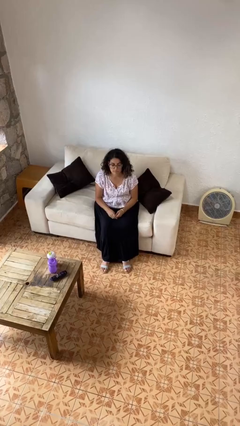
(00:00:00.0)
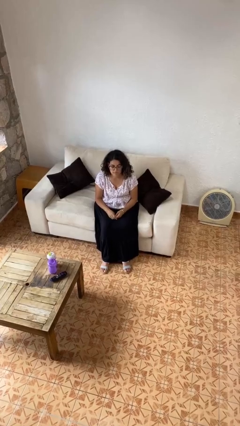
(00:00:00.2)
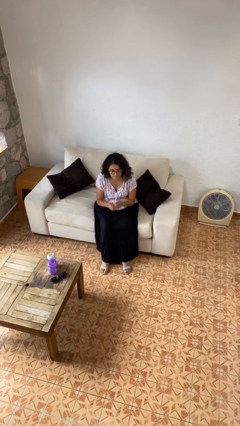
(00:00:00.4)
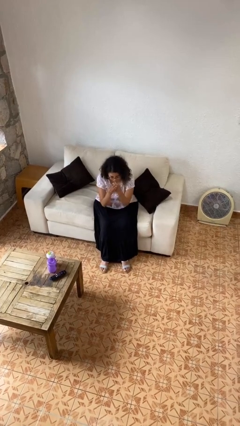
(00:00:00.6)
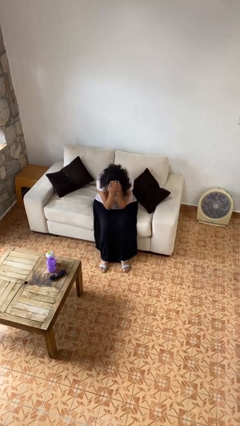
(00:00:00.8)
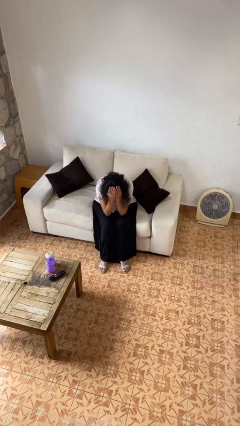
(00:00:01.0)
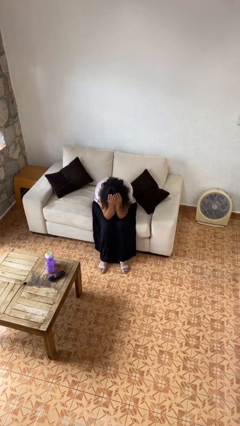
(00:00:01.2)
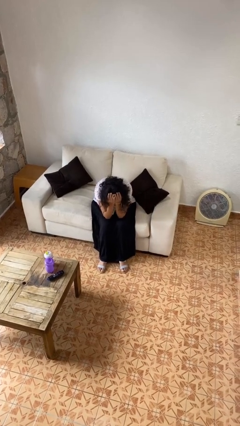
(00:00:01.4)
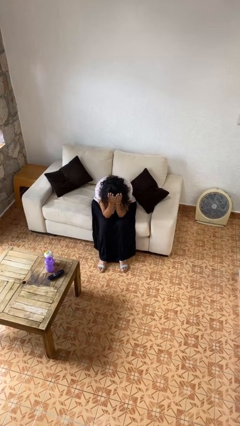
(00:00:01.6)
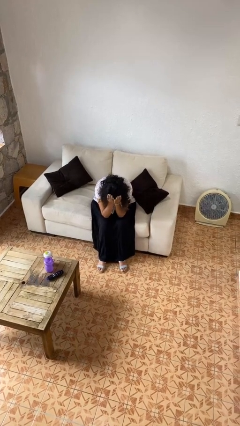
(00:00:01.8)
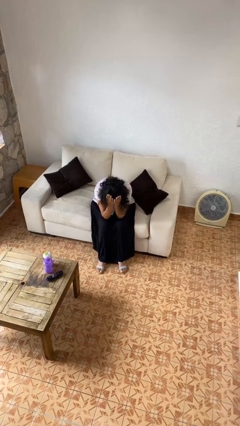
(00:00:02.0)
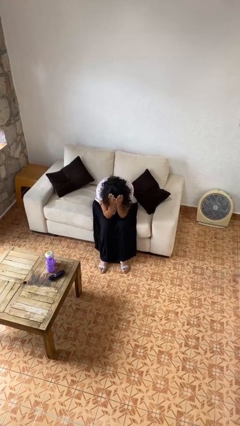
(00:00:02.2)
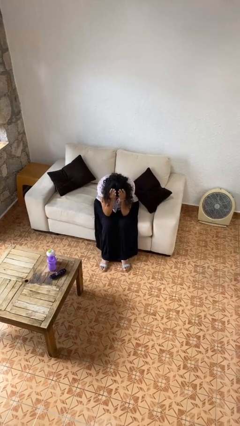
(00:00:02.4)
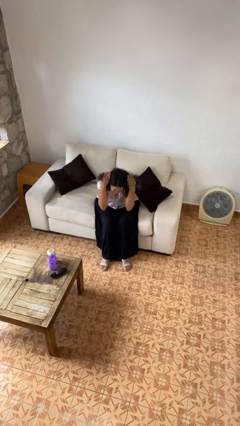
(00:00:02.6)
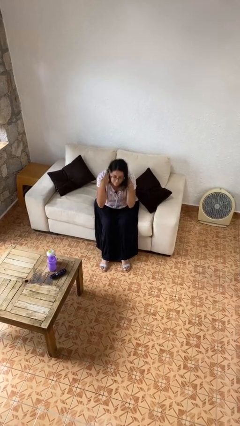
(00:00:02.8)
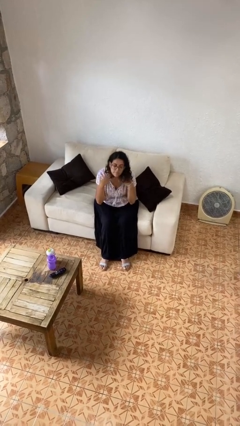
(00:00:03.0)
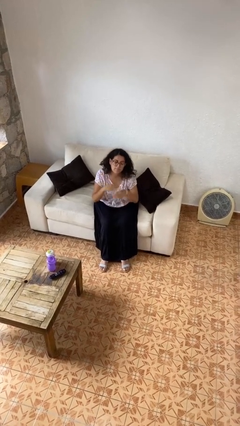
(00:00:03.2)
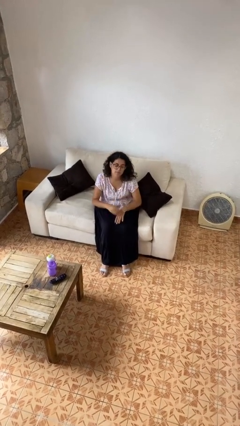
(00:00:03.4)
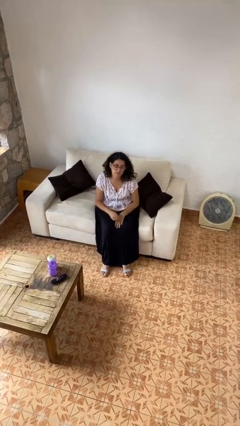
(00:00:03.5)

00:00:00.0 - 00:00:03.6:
person covers face with hands

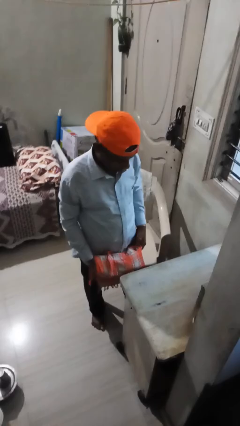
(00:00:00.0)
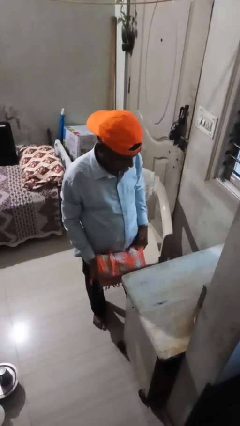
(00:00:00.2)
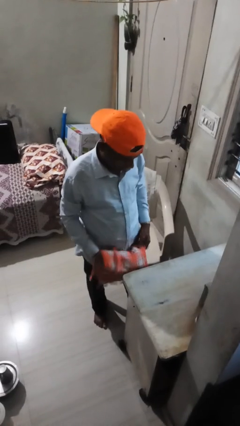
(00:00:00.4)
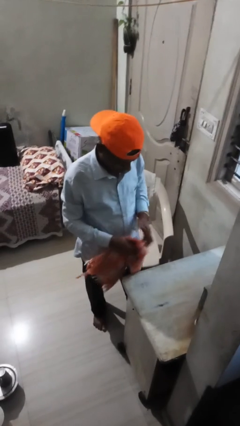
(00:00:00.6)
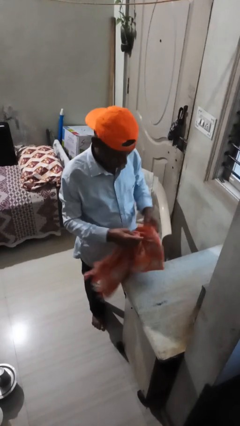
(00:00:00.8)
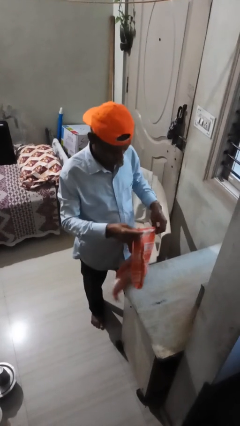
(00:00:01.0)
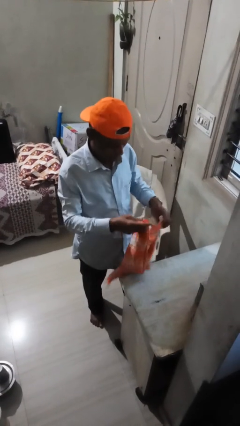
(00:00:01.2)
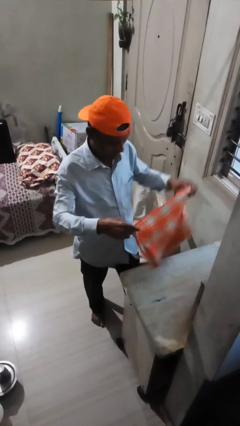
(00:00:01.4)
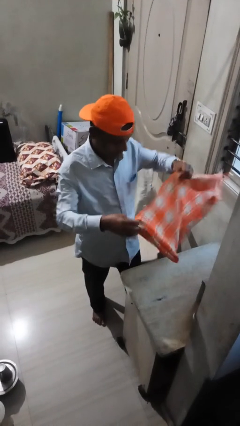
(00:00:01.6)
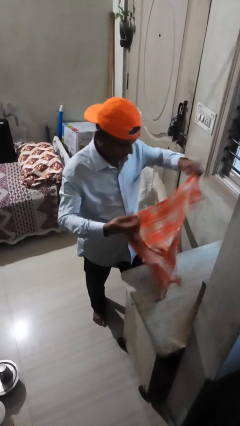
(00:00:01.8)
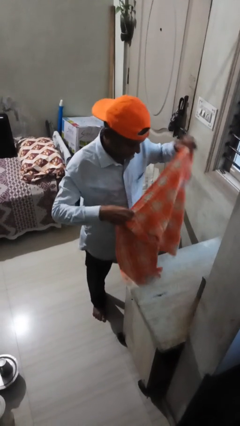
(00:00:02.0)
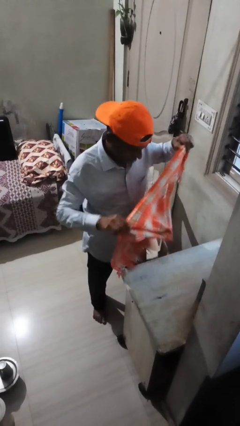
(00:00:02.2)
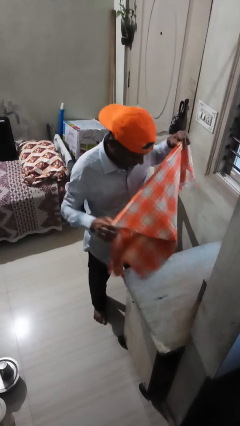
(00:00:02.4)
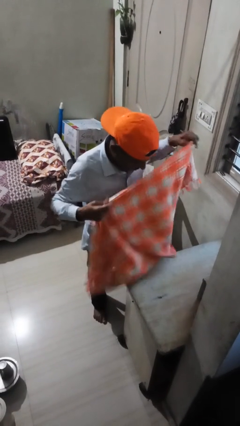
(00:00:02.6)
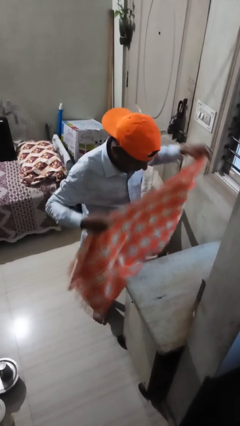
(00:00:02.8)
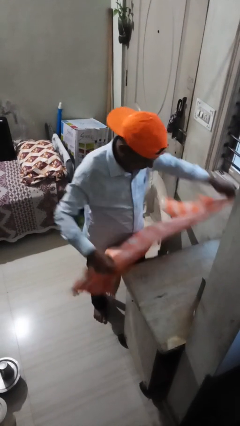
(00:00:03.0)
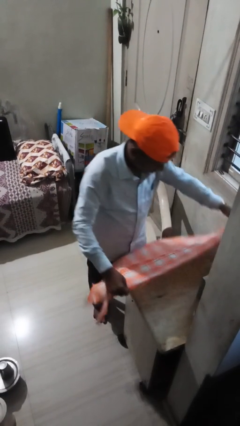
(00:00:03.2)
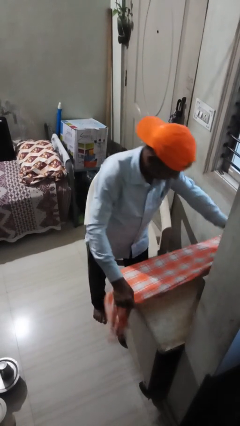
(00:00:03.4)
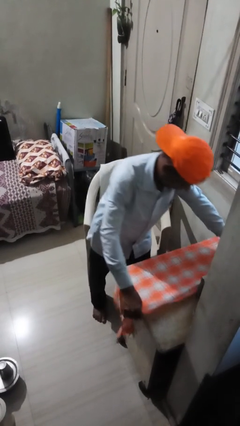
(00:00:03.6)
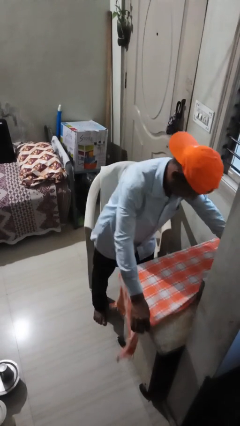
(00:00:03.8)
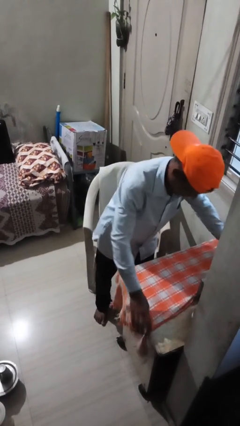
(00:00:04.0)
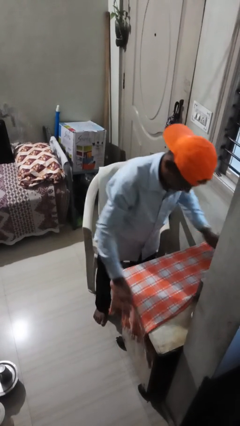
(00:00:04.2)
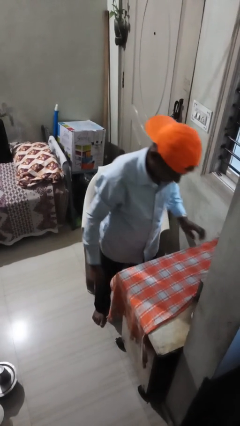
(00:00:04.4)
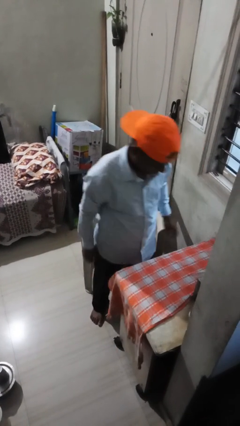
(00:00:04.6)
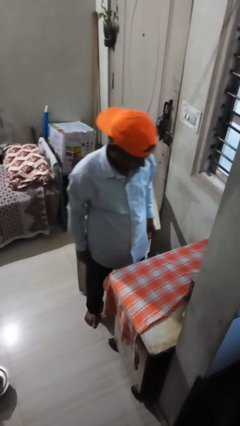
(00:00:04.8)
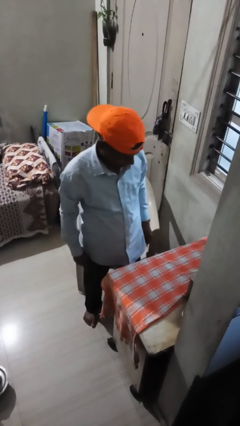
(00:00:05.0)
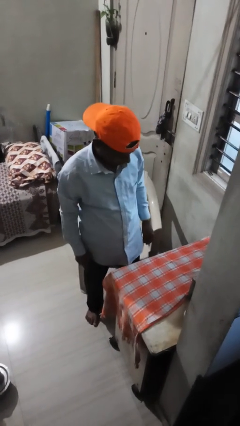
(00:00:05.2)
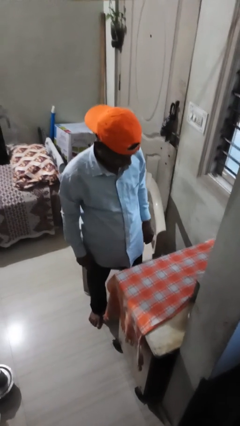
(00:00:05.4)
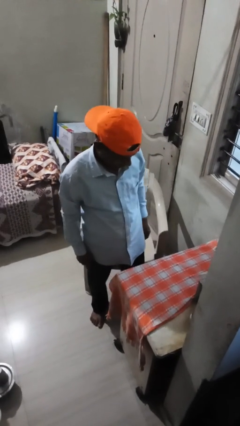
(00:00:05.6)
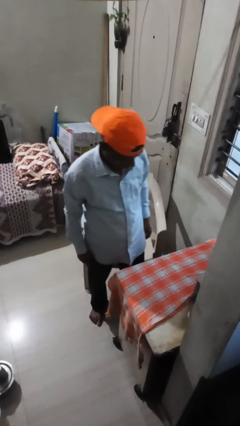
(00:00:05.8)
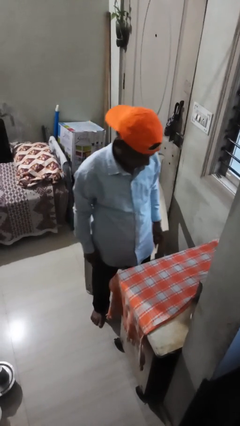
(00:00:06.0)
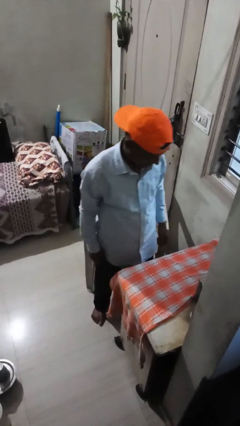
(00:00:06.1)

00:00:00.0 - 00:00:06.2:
person spreads tablecloth

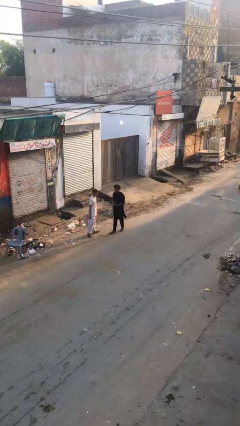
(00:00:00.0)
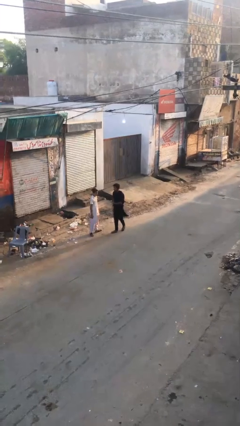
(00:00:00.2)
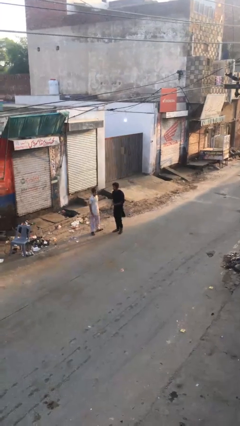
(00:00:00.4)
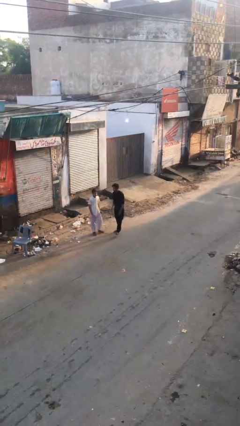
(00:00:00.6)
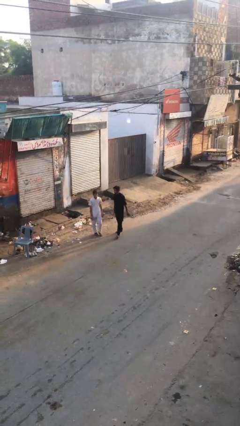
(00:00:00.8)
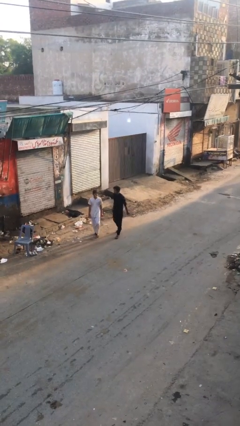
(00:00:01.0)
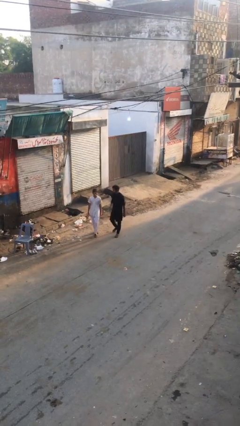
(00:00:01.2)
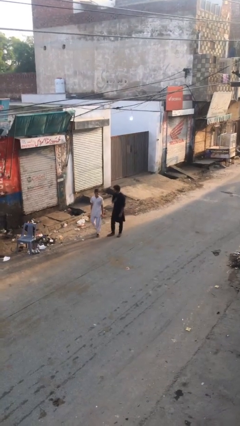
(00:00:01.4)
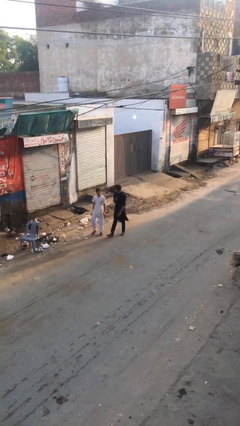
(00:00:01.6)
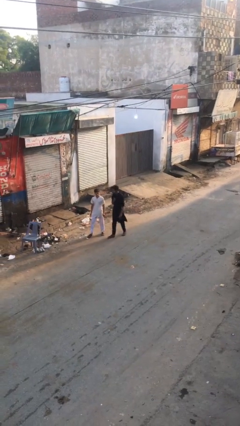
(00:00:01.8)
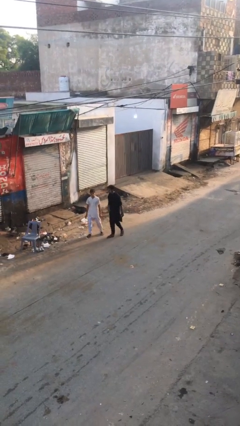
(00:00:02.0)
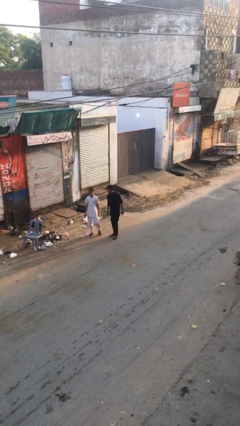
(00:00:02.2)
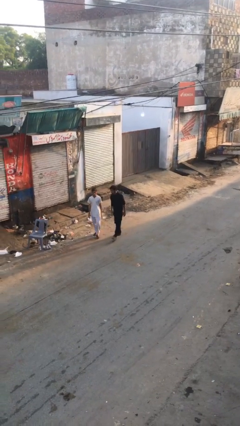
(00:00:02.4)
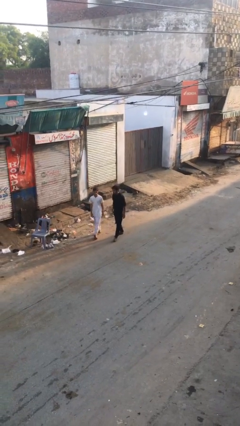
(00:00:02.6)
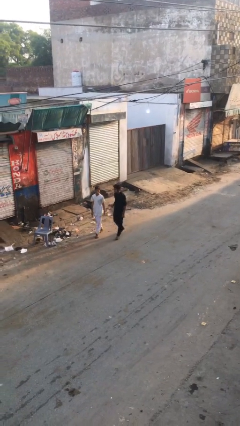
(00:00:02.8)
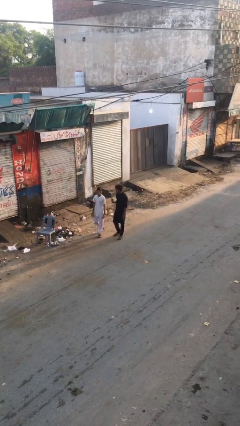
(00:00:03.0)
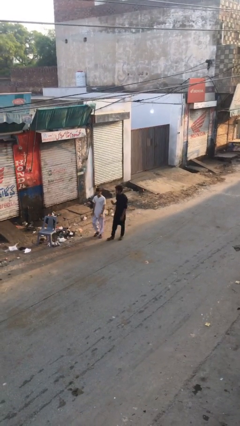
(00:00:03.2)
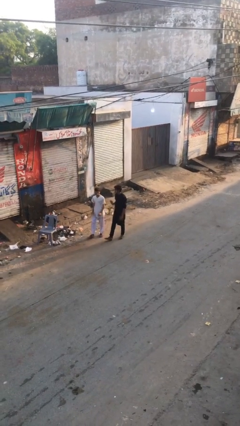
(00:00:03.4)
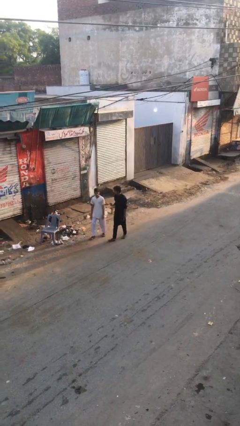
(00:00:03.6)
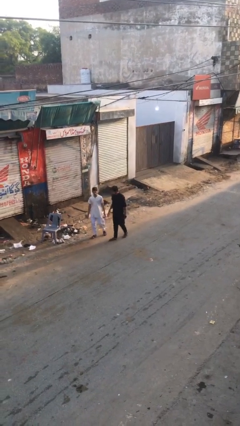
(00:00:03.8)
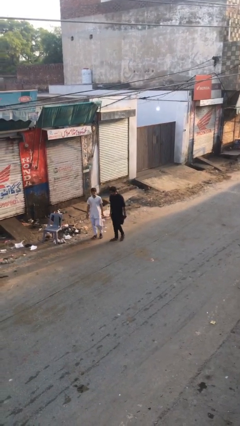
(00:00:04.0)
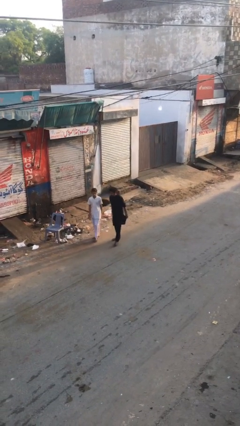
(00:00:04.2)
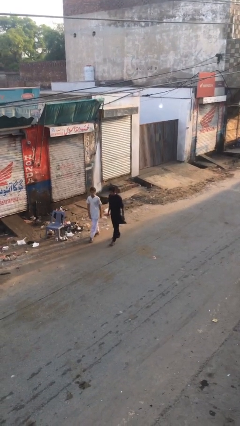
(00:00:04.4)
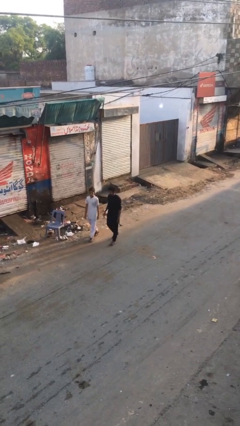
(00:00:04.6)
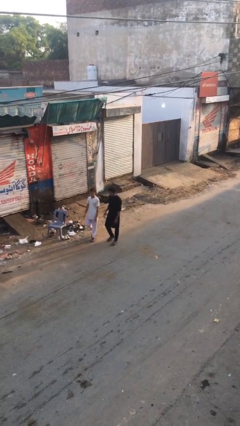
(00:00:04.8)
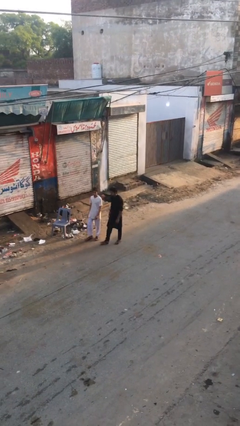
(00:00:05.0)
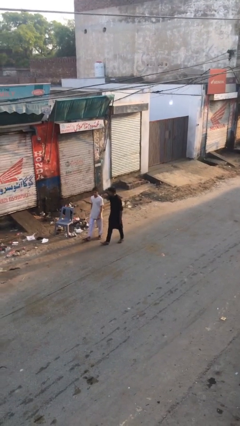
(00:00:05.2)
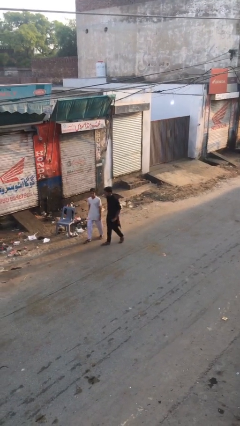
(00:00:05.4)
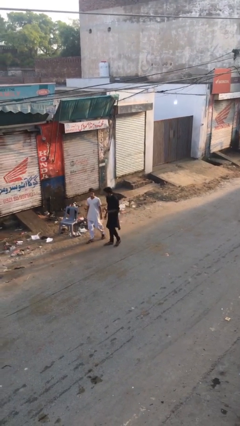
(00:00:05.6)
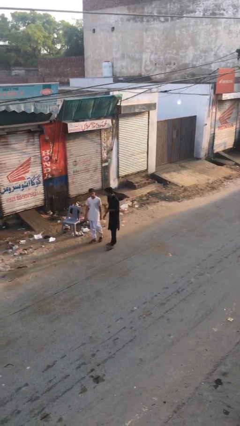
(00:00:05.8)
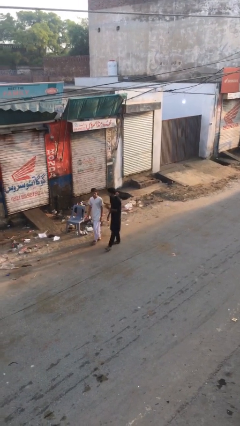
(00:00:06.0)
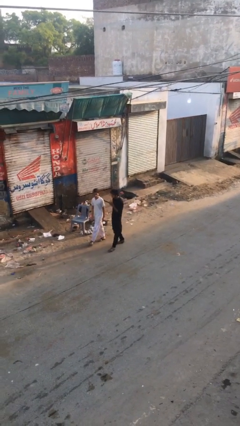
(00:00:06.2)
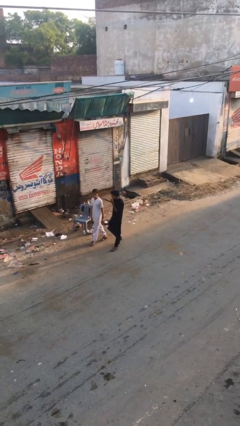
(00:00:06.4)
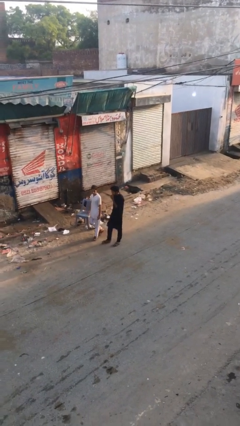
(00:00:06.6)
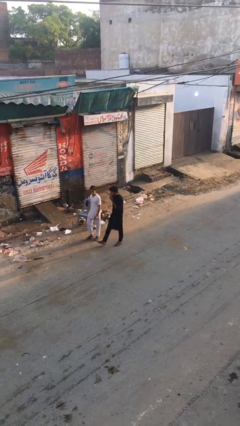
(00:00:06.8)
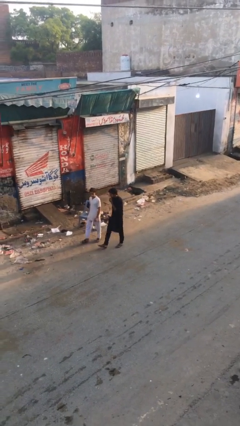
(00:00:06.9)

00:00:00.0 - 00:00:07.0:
person talks to person

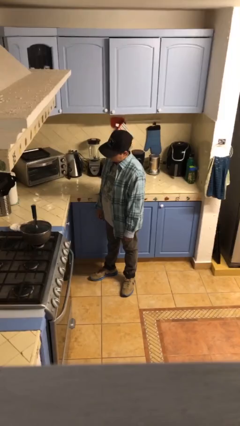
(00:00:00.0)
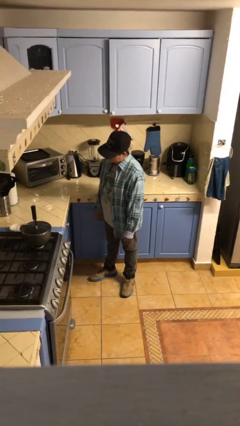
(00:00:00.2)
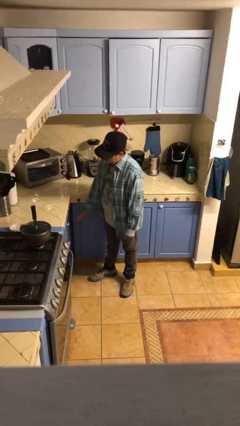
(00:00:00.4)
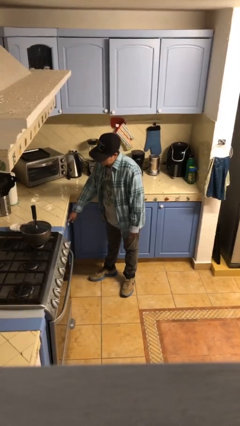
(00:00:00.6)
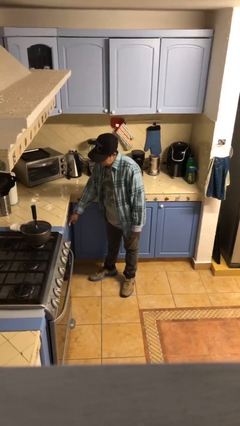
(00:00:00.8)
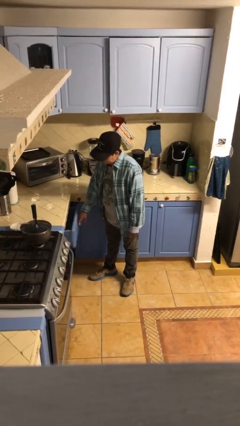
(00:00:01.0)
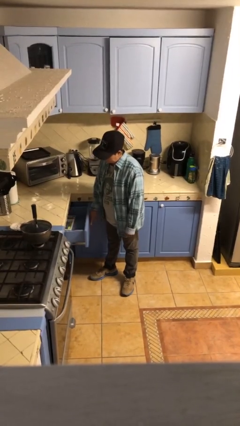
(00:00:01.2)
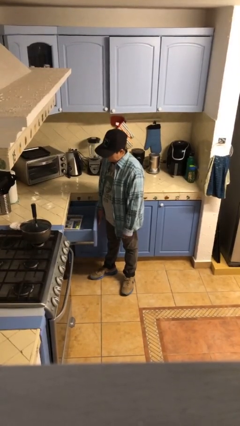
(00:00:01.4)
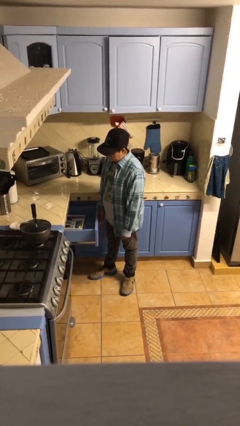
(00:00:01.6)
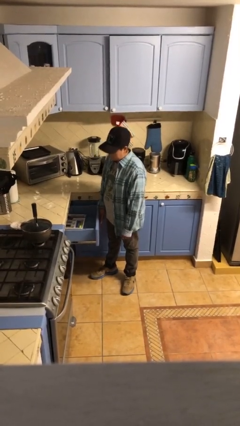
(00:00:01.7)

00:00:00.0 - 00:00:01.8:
person opens kitchen drawer
